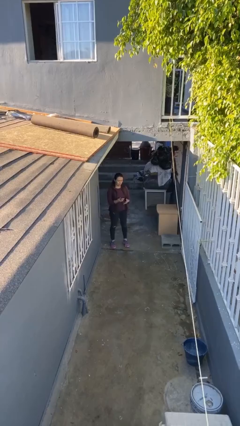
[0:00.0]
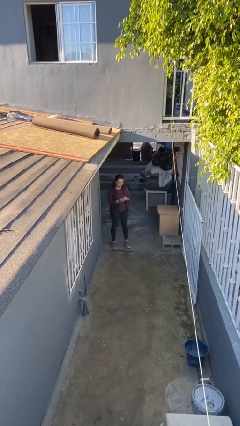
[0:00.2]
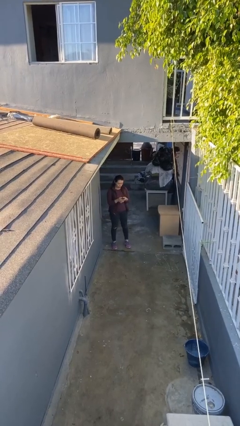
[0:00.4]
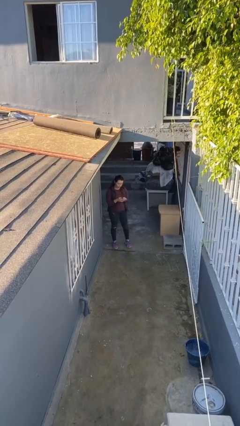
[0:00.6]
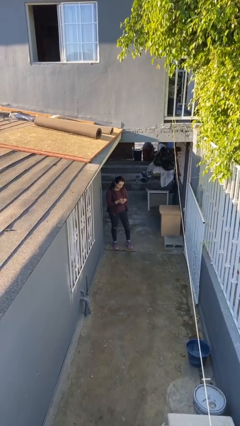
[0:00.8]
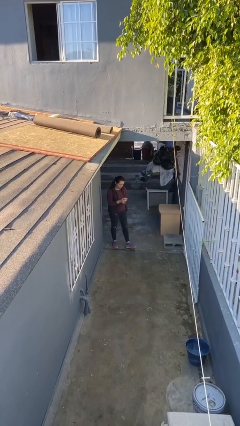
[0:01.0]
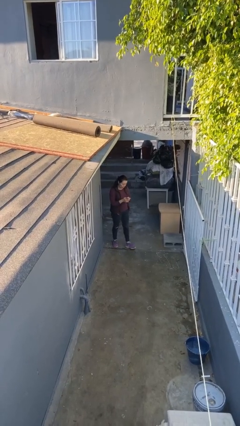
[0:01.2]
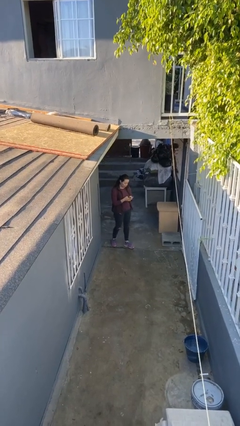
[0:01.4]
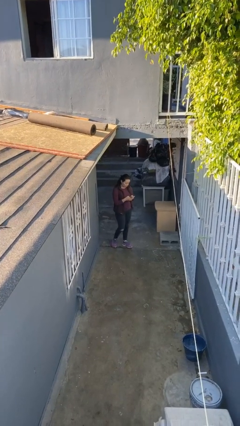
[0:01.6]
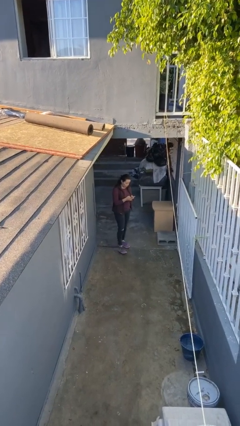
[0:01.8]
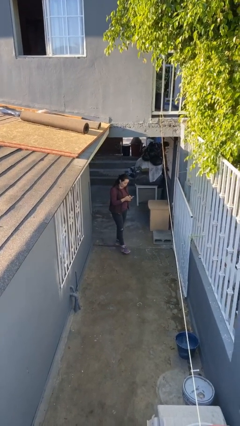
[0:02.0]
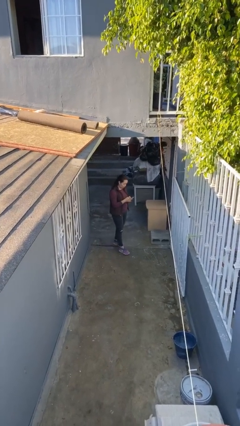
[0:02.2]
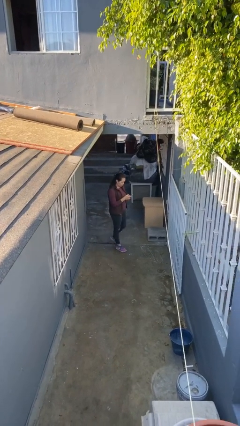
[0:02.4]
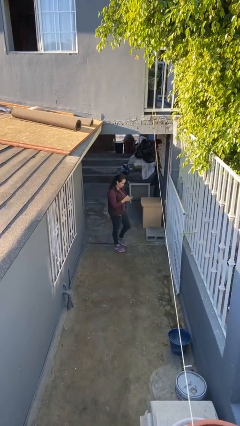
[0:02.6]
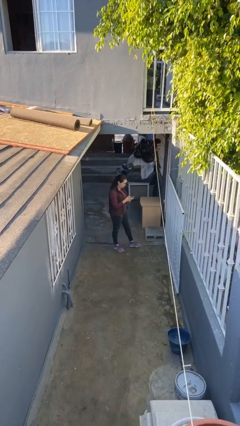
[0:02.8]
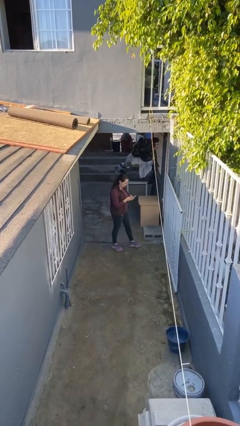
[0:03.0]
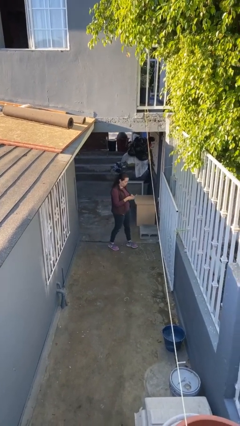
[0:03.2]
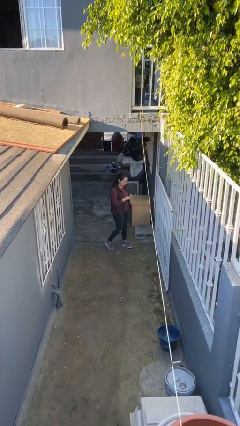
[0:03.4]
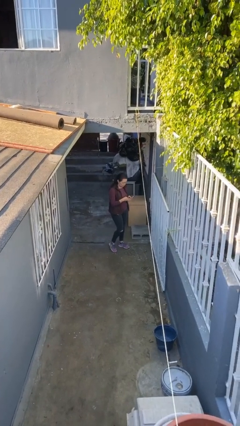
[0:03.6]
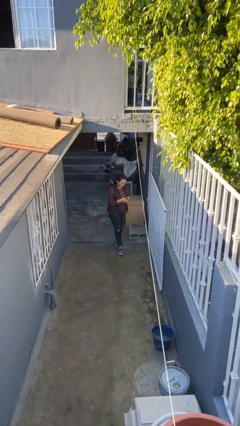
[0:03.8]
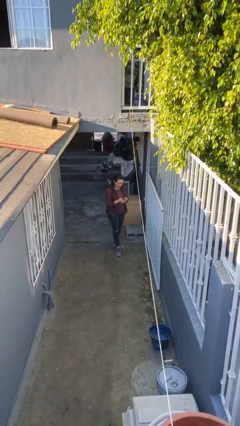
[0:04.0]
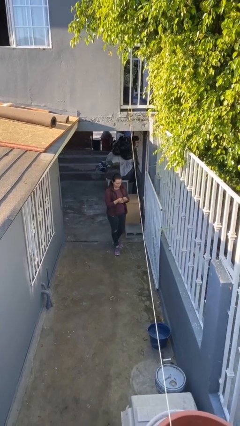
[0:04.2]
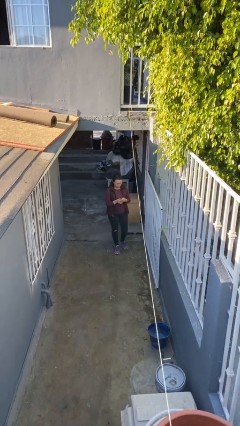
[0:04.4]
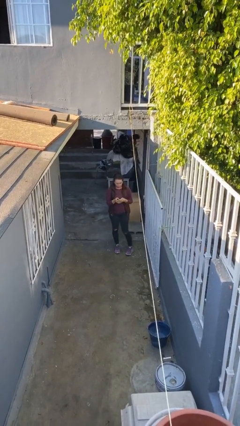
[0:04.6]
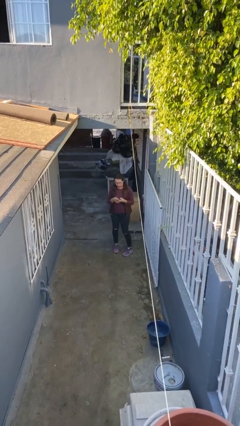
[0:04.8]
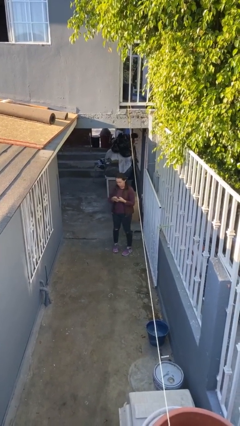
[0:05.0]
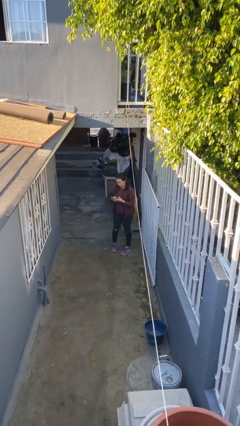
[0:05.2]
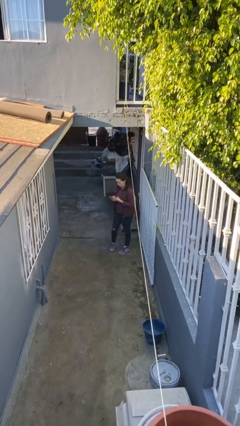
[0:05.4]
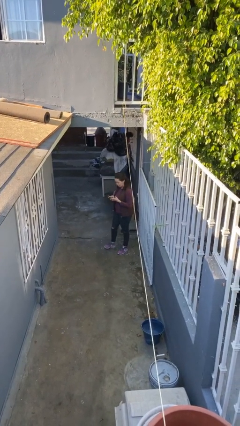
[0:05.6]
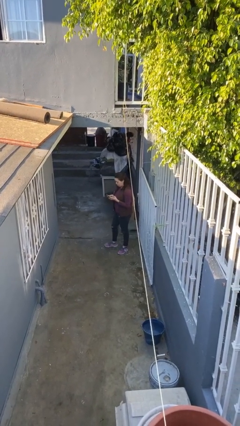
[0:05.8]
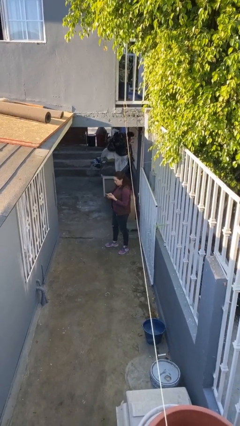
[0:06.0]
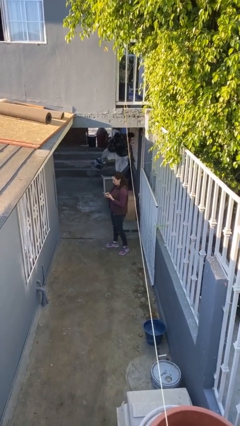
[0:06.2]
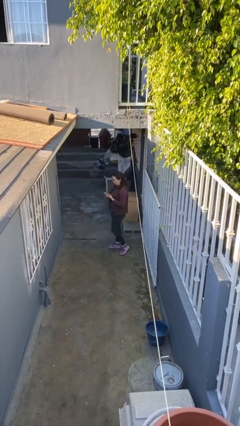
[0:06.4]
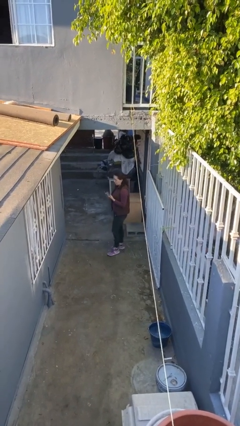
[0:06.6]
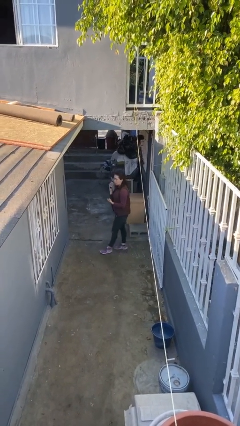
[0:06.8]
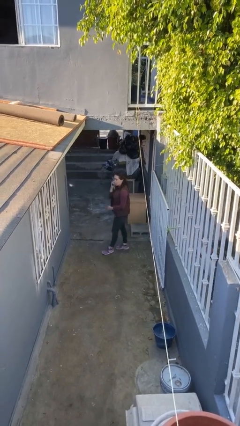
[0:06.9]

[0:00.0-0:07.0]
person texts on phone

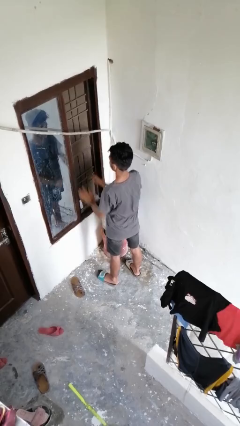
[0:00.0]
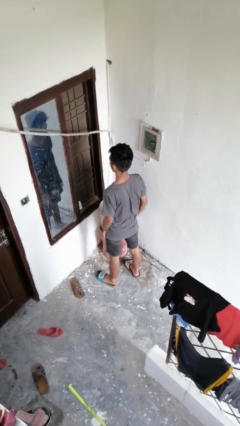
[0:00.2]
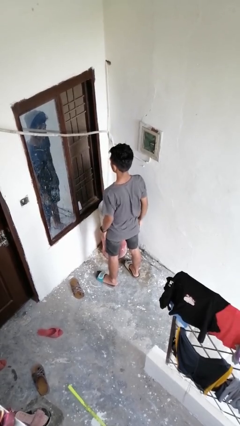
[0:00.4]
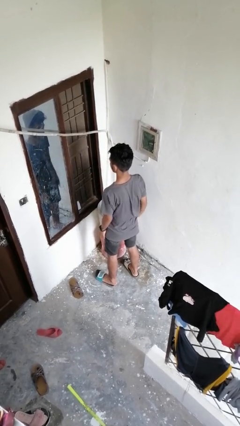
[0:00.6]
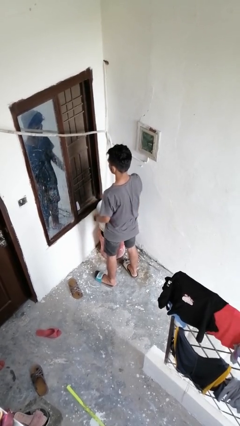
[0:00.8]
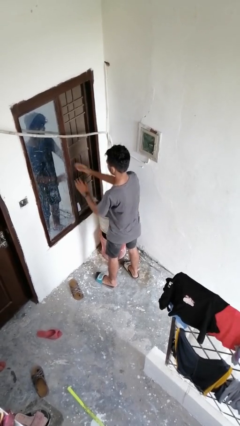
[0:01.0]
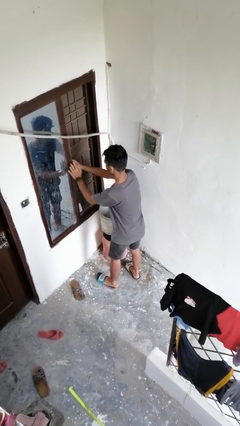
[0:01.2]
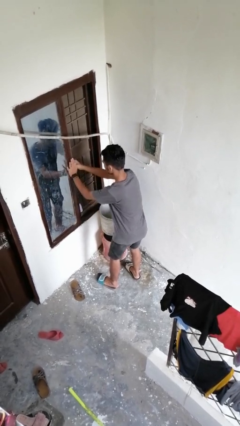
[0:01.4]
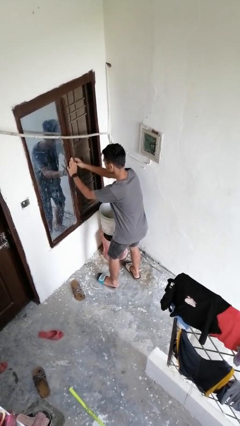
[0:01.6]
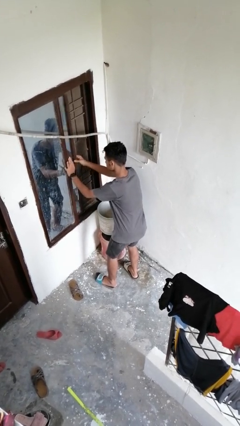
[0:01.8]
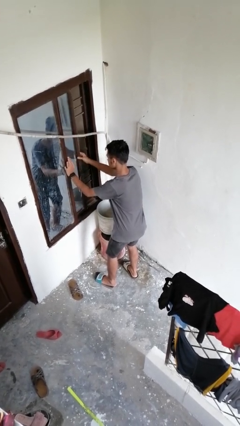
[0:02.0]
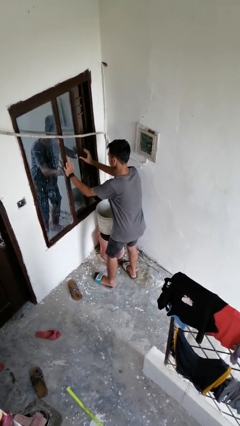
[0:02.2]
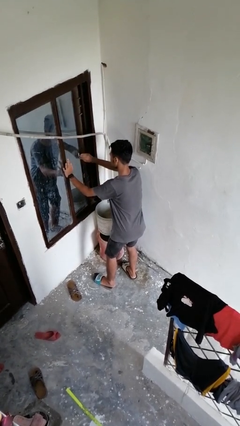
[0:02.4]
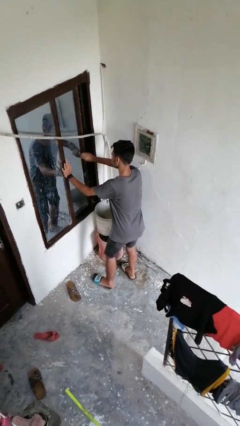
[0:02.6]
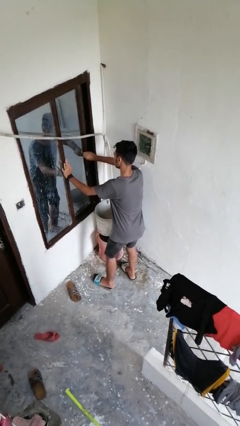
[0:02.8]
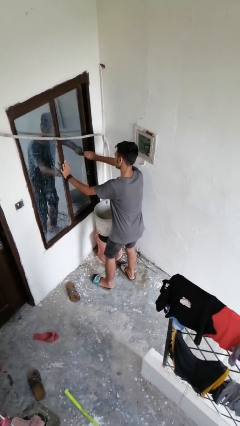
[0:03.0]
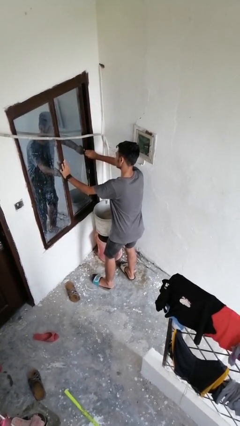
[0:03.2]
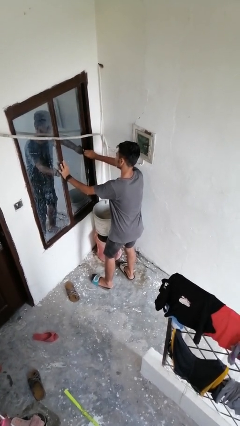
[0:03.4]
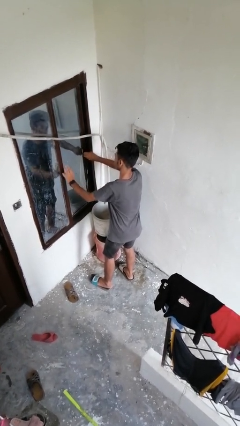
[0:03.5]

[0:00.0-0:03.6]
person closes home window

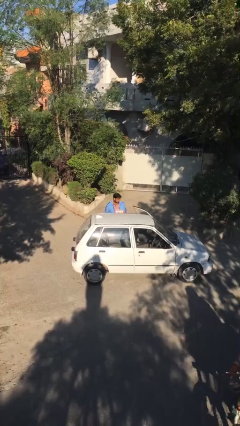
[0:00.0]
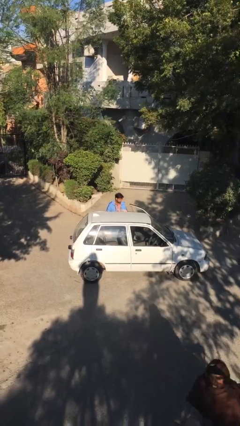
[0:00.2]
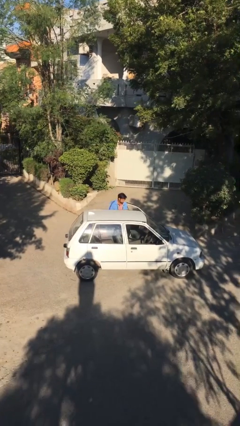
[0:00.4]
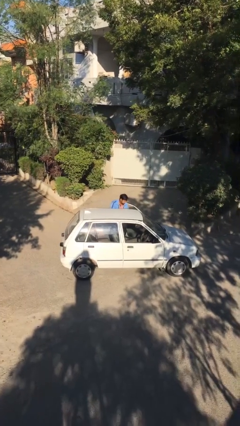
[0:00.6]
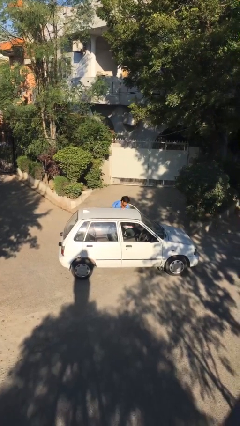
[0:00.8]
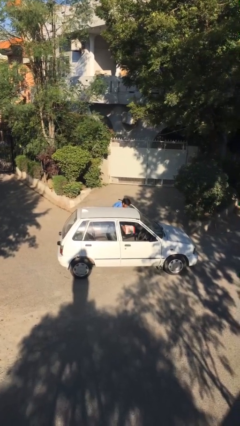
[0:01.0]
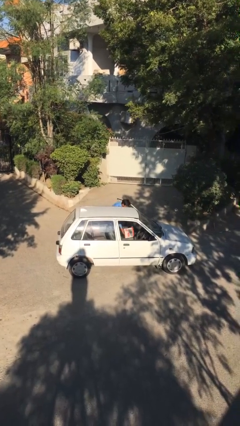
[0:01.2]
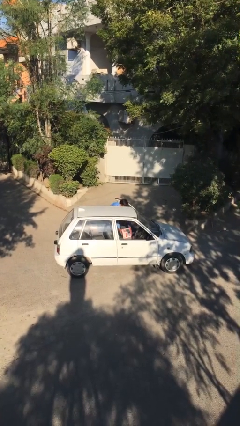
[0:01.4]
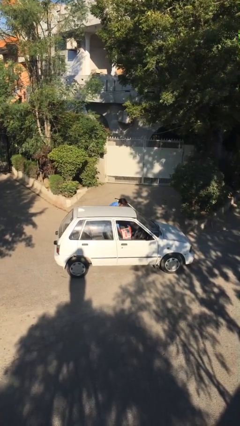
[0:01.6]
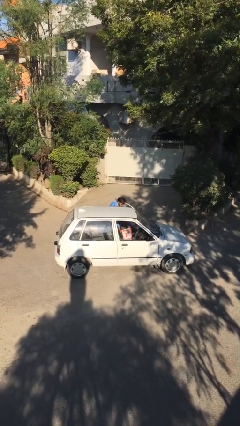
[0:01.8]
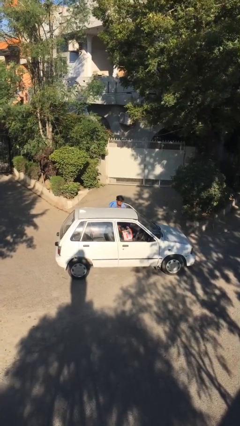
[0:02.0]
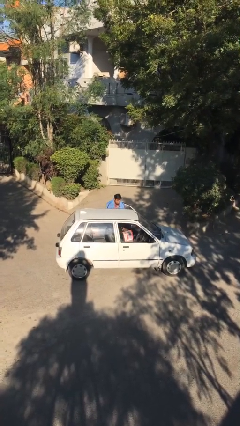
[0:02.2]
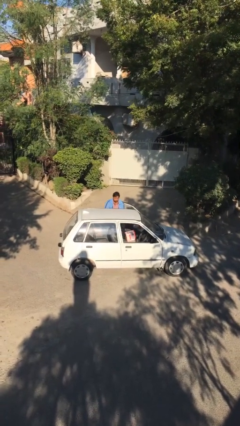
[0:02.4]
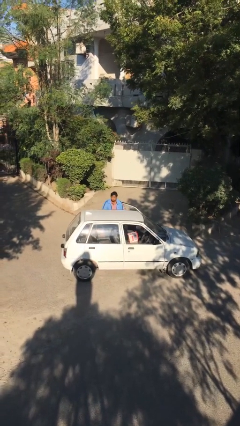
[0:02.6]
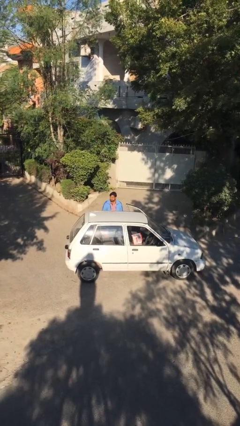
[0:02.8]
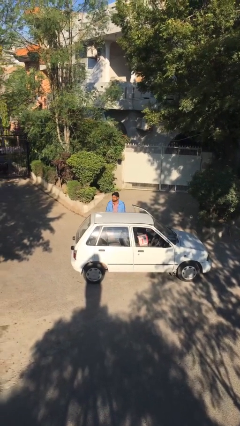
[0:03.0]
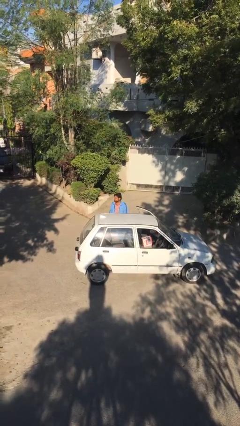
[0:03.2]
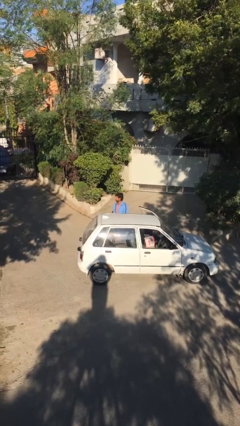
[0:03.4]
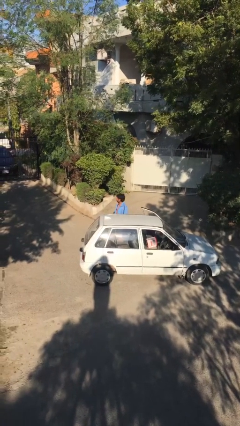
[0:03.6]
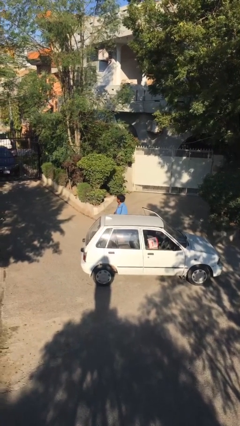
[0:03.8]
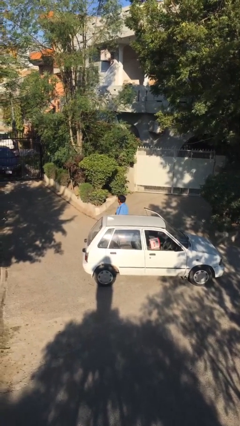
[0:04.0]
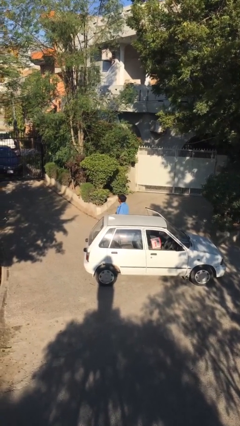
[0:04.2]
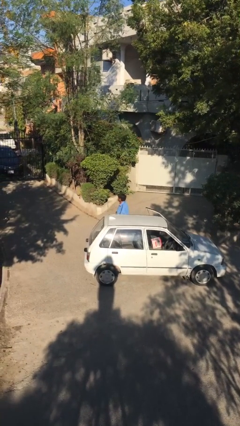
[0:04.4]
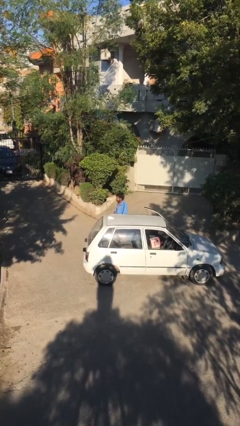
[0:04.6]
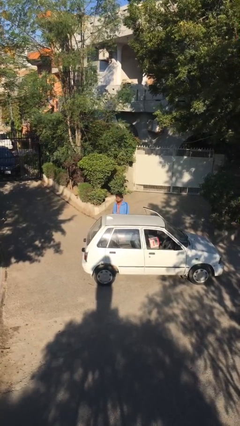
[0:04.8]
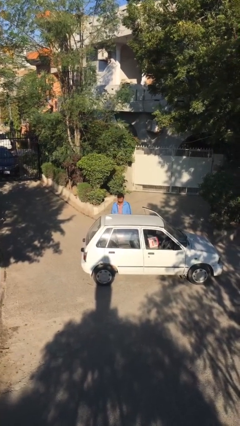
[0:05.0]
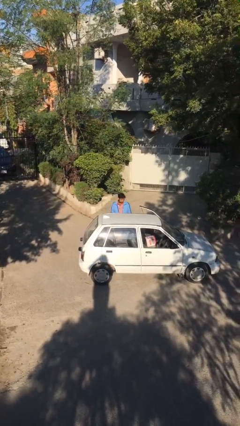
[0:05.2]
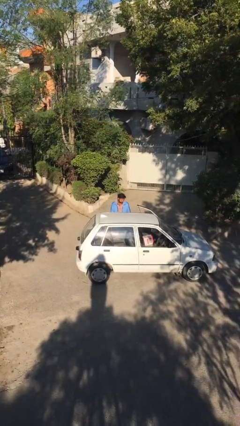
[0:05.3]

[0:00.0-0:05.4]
person loads car

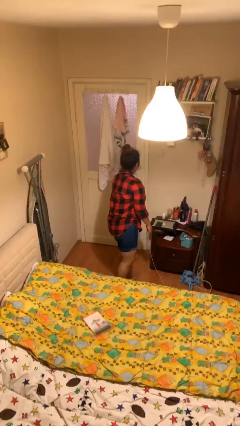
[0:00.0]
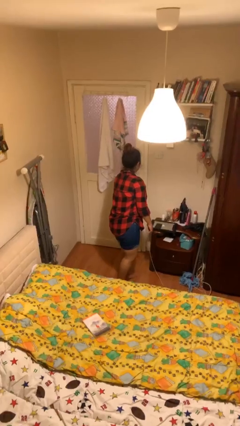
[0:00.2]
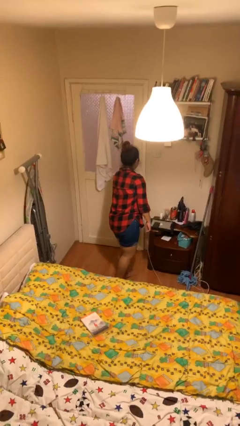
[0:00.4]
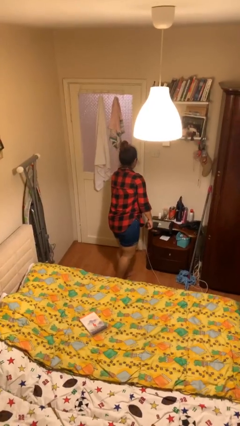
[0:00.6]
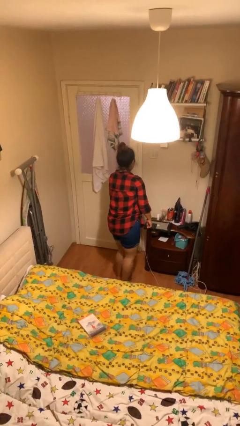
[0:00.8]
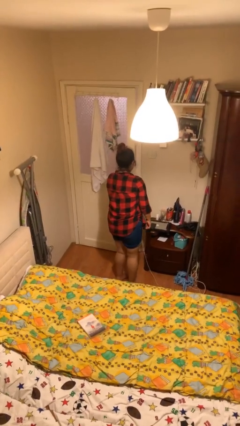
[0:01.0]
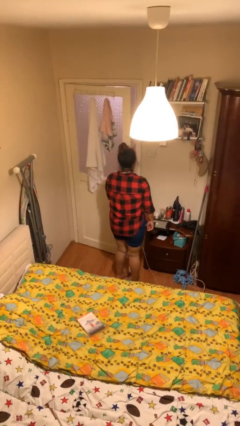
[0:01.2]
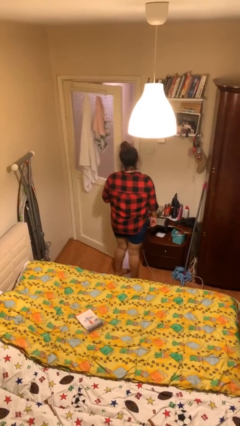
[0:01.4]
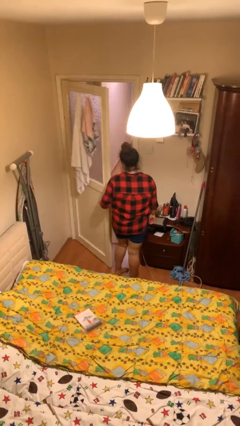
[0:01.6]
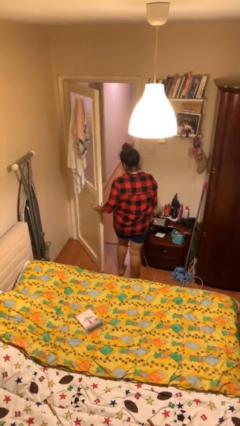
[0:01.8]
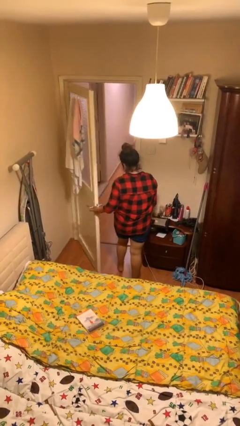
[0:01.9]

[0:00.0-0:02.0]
person opens facility door
